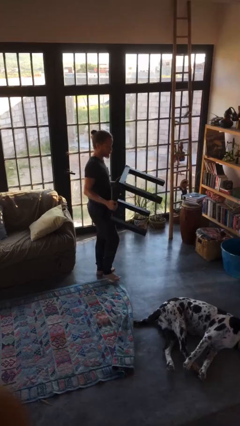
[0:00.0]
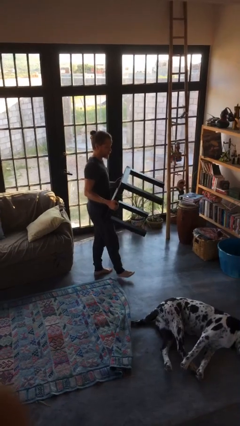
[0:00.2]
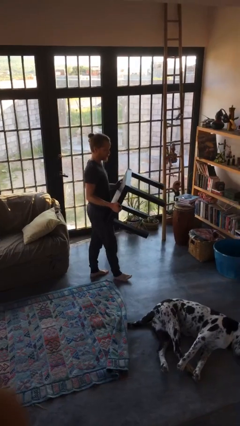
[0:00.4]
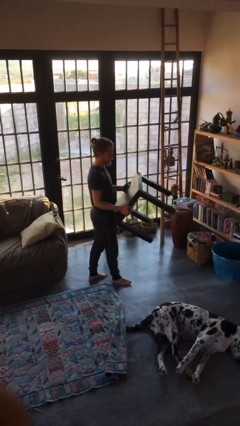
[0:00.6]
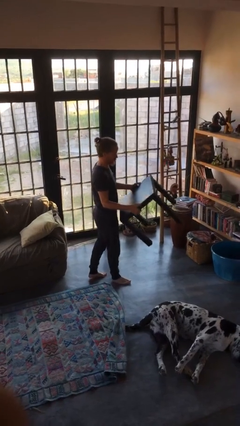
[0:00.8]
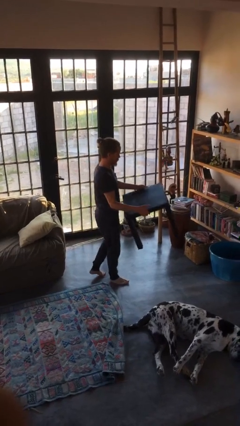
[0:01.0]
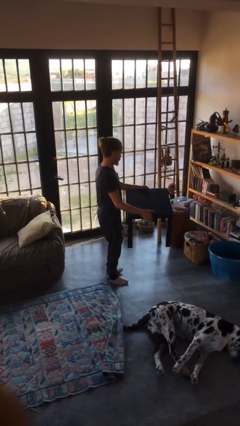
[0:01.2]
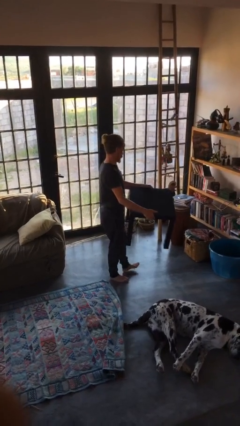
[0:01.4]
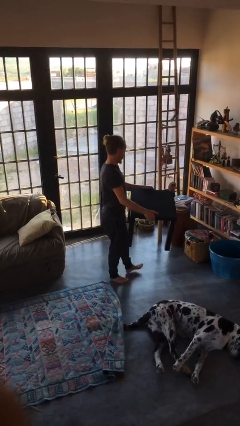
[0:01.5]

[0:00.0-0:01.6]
person carries furniture

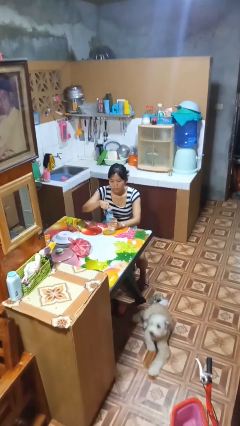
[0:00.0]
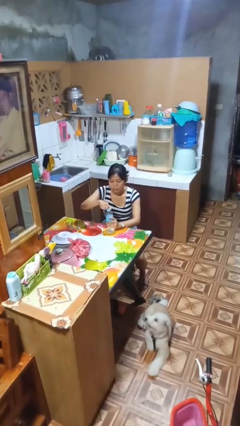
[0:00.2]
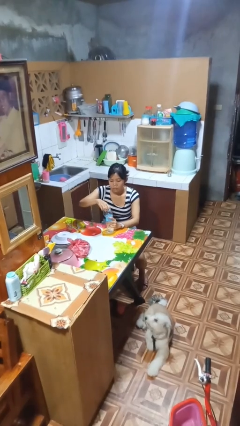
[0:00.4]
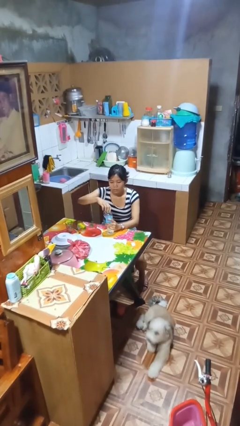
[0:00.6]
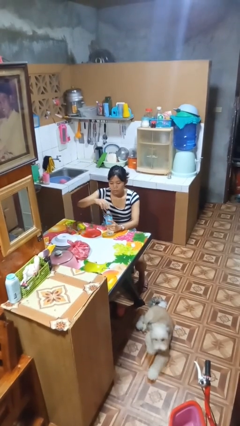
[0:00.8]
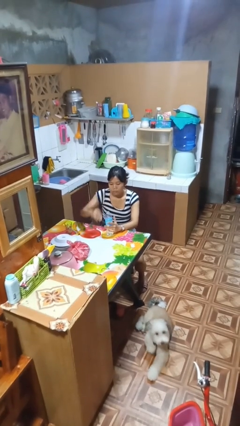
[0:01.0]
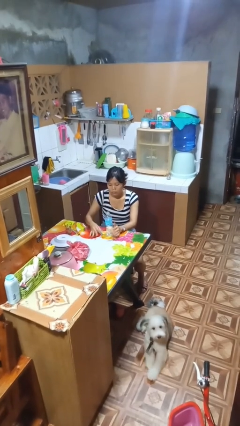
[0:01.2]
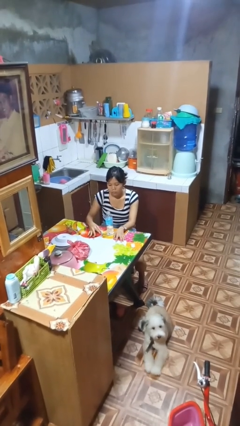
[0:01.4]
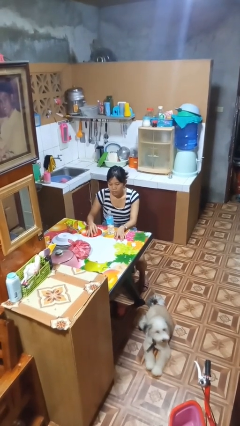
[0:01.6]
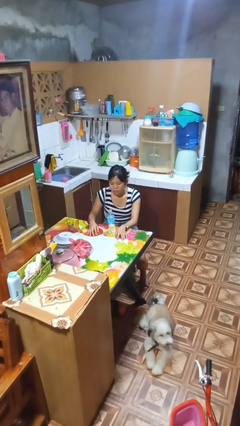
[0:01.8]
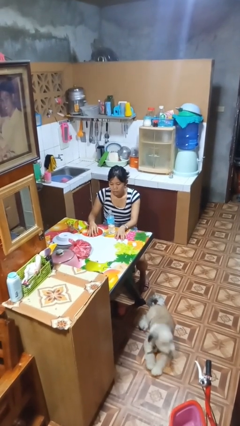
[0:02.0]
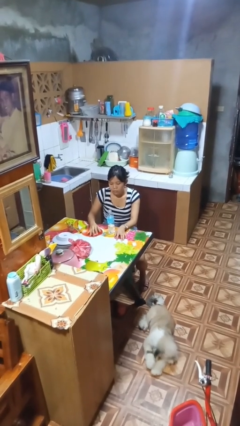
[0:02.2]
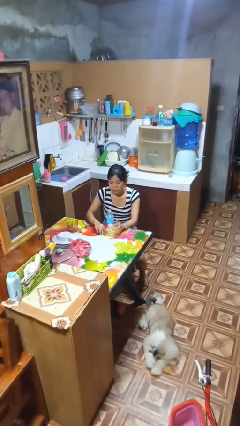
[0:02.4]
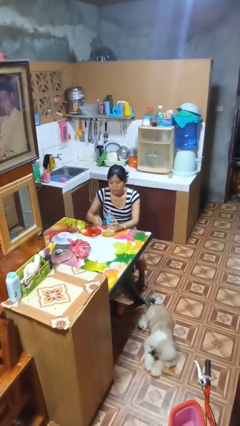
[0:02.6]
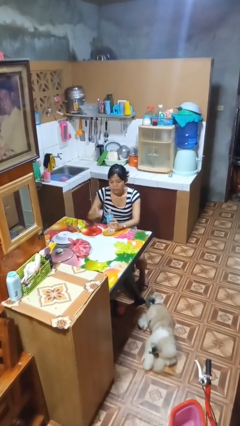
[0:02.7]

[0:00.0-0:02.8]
person unscrews lid from bottle

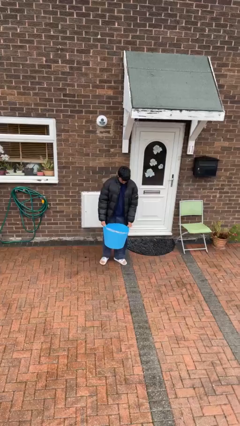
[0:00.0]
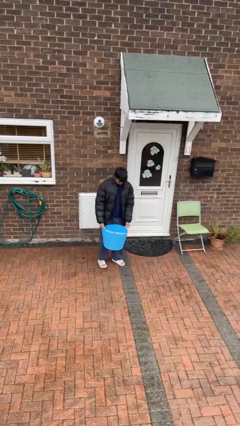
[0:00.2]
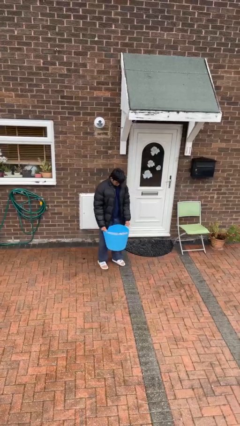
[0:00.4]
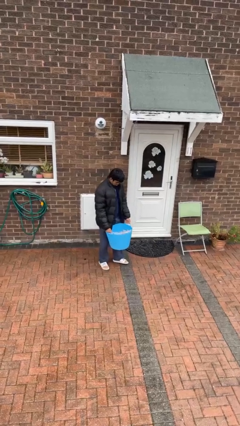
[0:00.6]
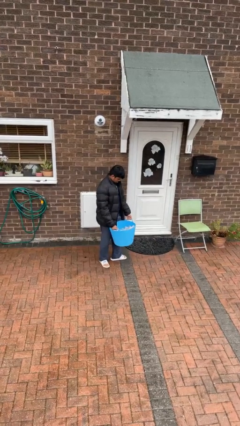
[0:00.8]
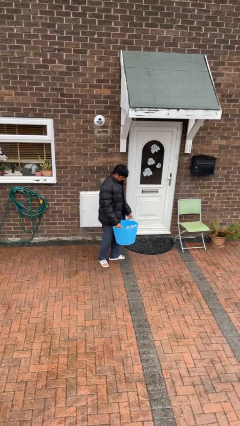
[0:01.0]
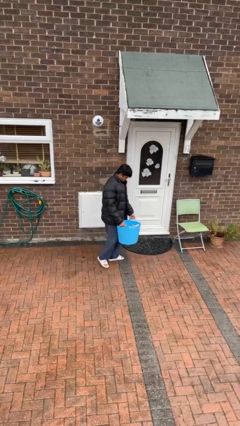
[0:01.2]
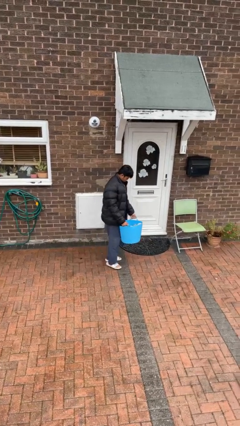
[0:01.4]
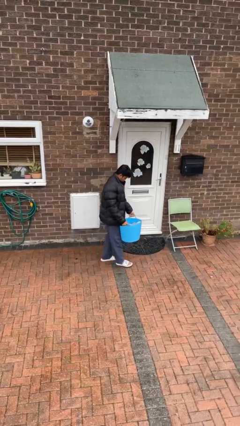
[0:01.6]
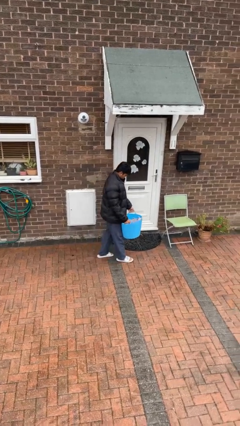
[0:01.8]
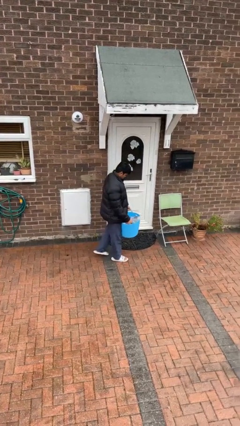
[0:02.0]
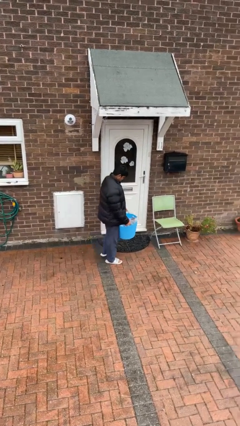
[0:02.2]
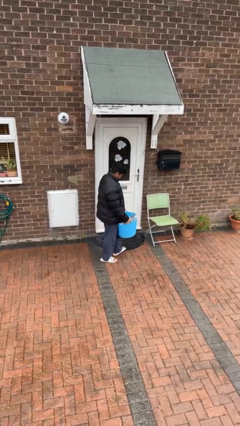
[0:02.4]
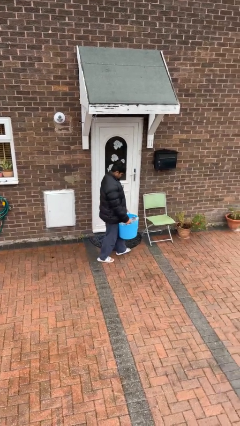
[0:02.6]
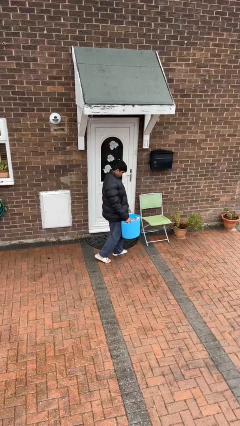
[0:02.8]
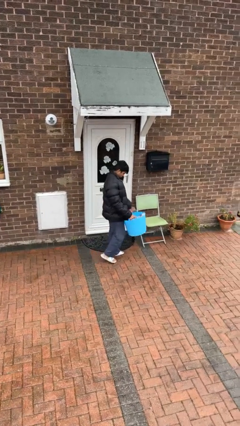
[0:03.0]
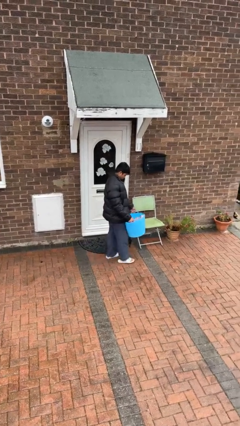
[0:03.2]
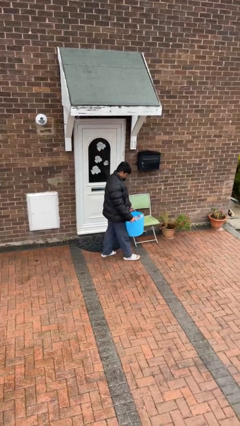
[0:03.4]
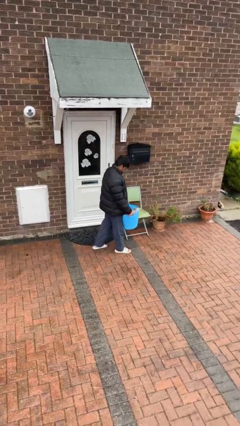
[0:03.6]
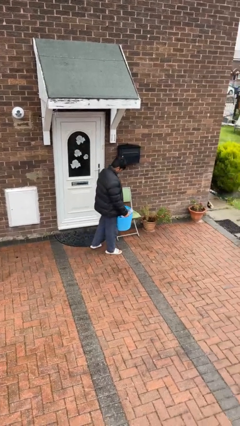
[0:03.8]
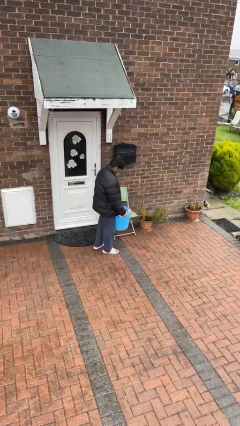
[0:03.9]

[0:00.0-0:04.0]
person carries laundry basket

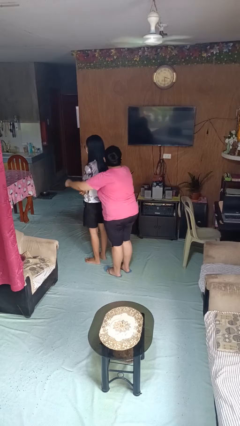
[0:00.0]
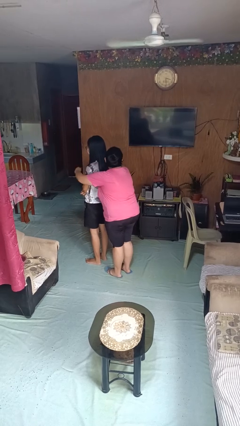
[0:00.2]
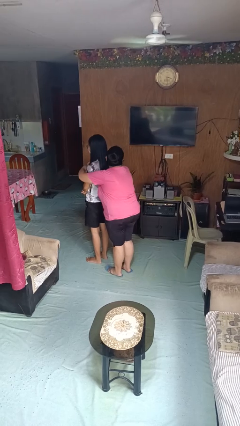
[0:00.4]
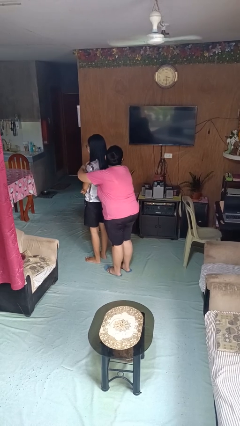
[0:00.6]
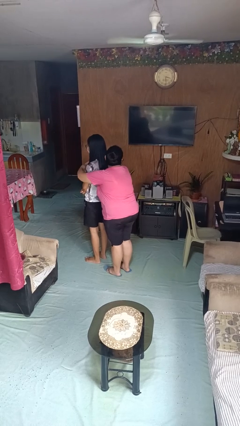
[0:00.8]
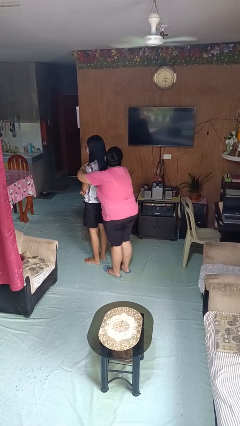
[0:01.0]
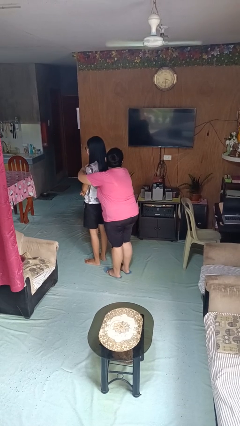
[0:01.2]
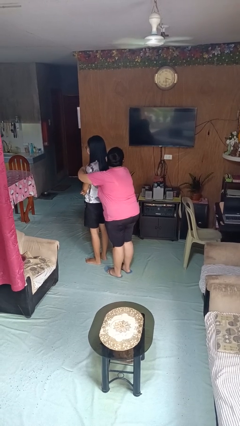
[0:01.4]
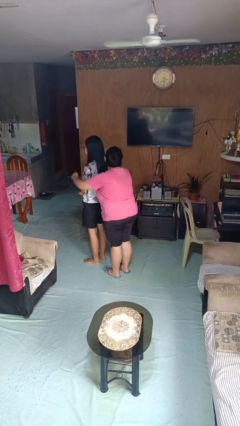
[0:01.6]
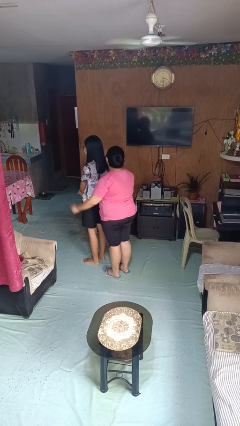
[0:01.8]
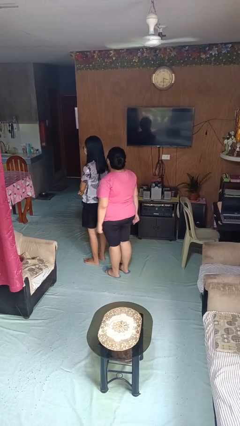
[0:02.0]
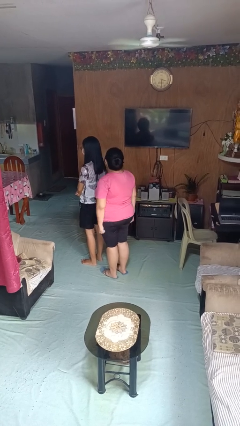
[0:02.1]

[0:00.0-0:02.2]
person hugs person from behind

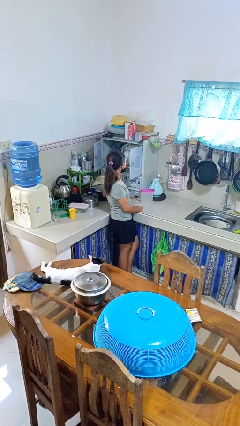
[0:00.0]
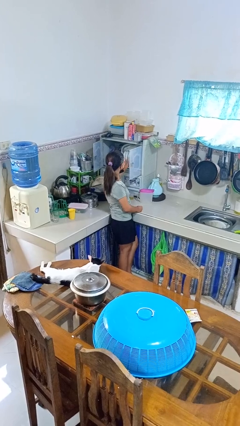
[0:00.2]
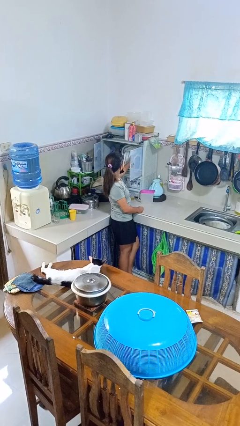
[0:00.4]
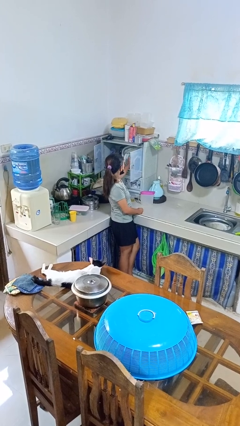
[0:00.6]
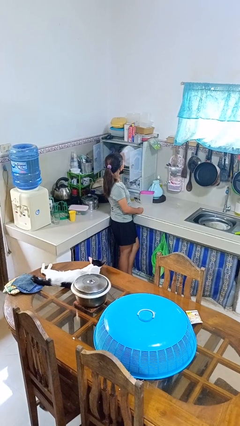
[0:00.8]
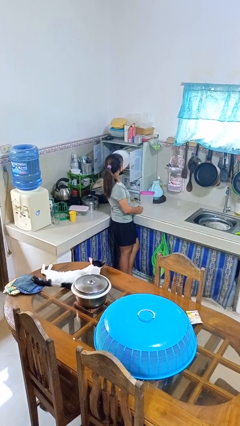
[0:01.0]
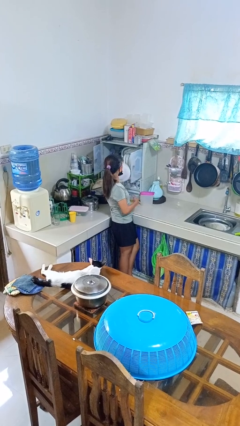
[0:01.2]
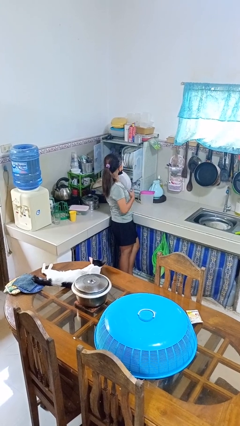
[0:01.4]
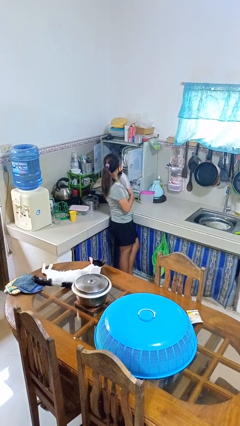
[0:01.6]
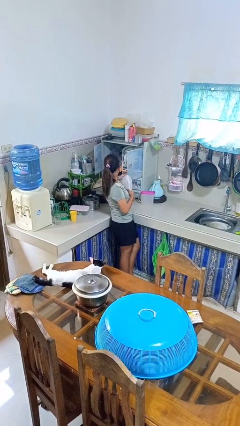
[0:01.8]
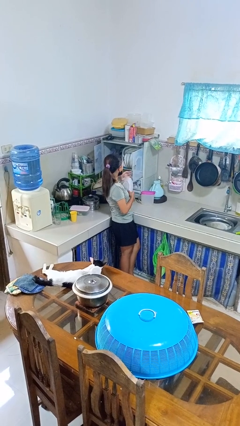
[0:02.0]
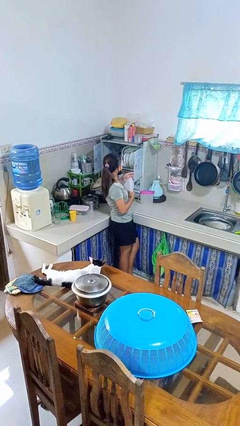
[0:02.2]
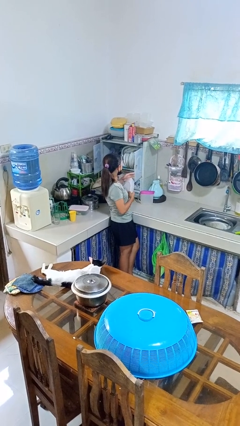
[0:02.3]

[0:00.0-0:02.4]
person takes object from kitchen drawer

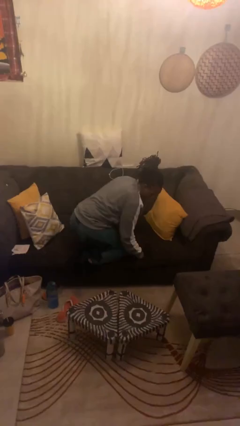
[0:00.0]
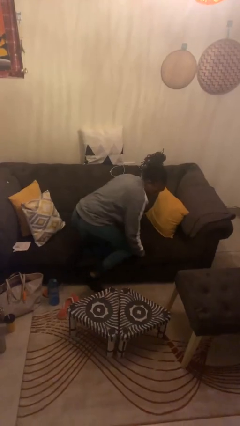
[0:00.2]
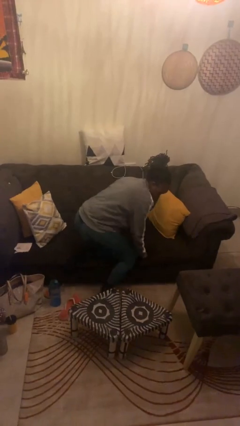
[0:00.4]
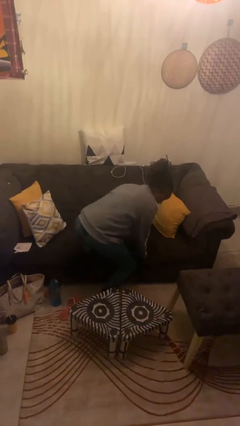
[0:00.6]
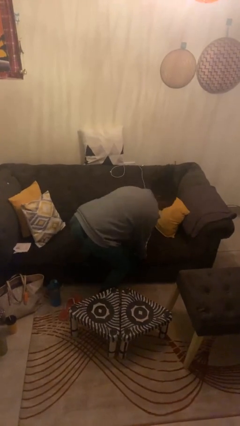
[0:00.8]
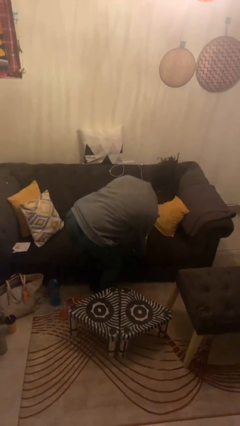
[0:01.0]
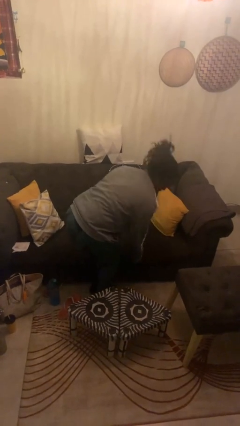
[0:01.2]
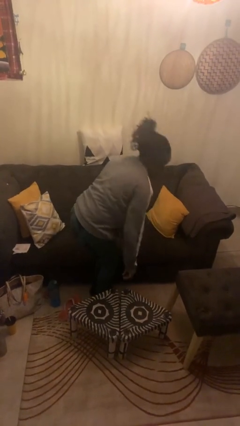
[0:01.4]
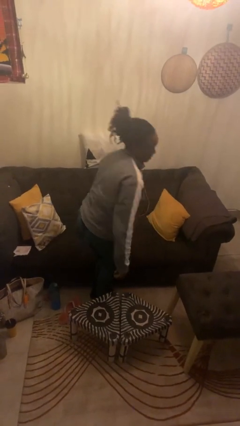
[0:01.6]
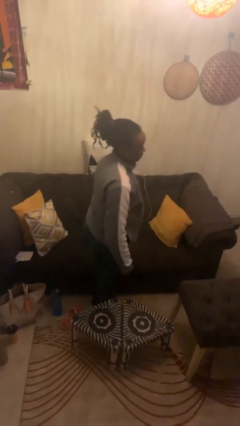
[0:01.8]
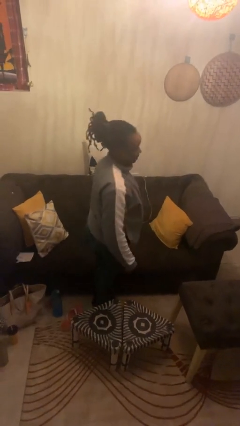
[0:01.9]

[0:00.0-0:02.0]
person climbs off couch

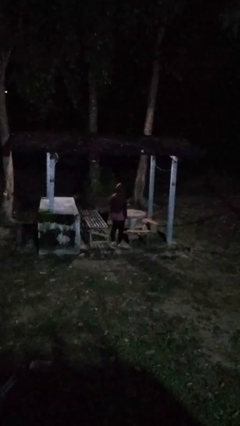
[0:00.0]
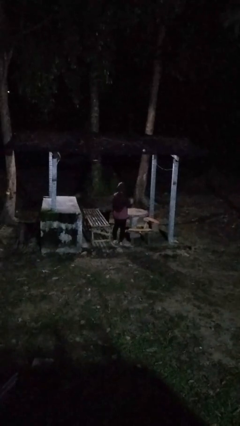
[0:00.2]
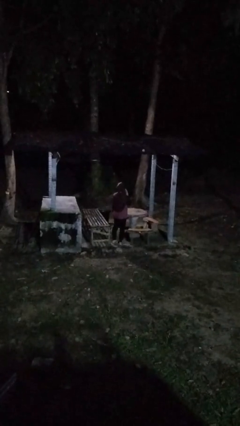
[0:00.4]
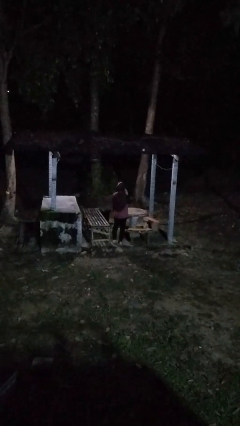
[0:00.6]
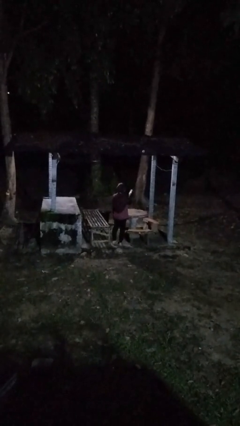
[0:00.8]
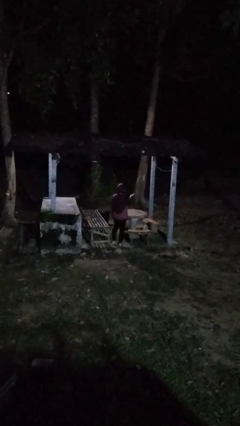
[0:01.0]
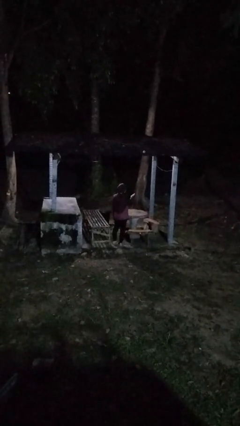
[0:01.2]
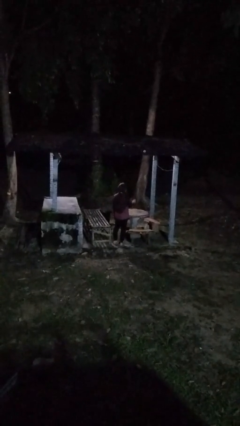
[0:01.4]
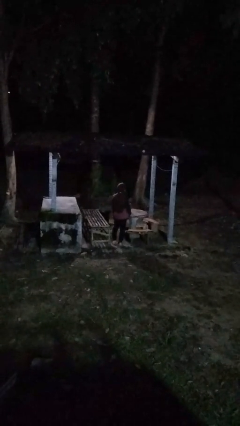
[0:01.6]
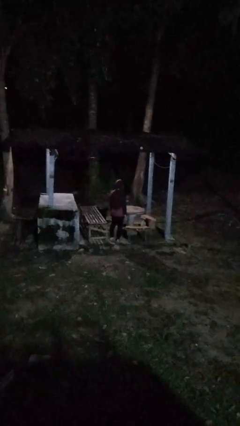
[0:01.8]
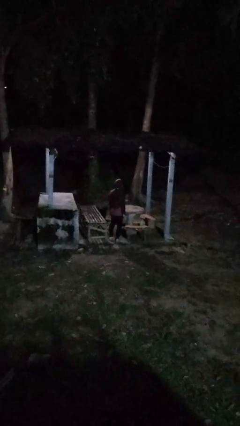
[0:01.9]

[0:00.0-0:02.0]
person gestures blow kiss

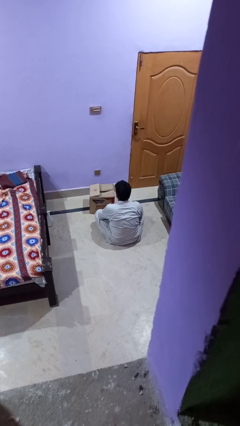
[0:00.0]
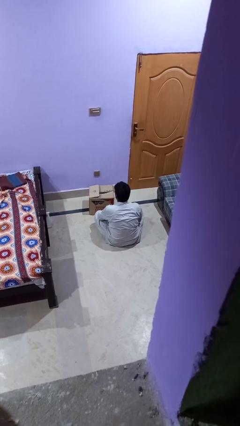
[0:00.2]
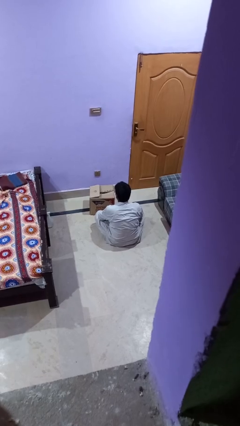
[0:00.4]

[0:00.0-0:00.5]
person opens box
